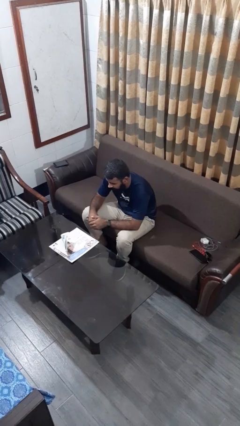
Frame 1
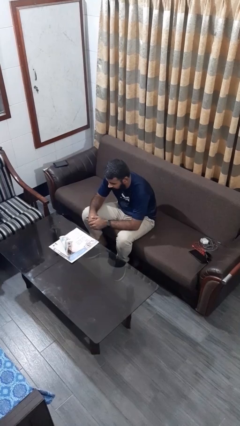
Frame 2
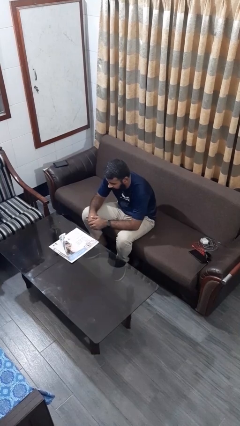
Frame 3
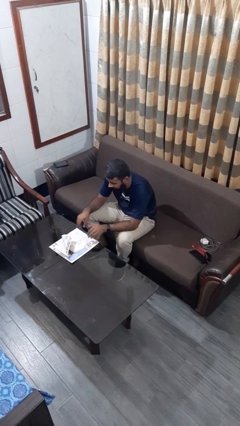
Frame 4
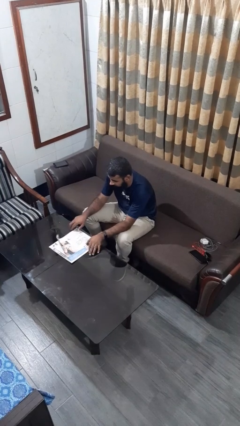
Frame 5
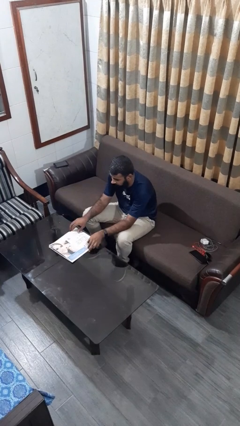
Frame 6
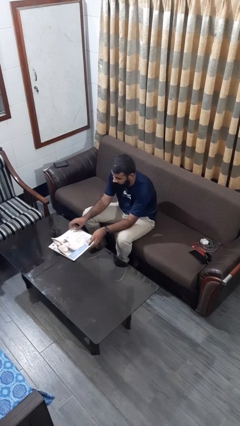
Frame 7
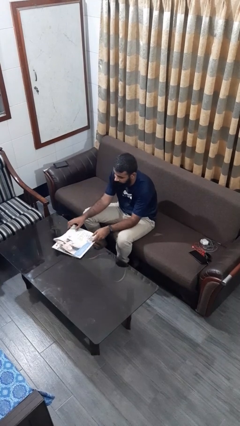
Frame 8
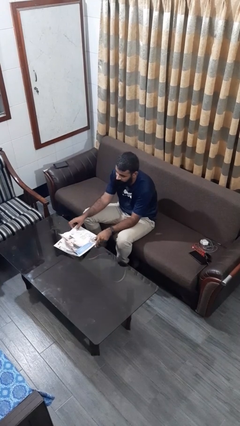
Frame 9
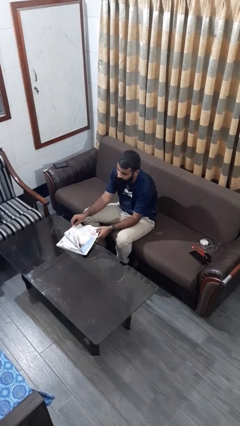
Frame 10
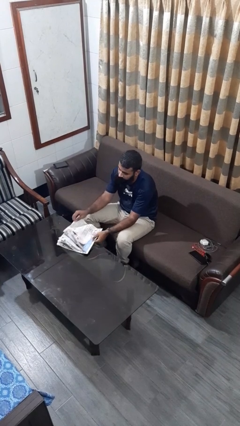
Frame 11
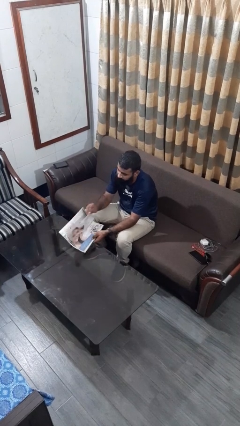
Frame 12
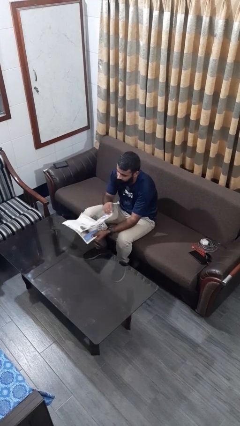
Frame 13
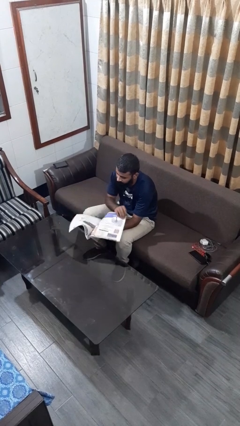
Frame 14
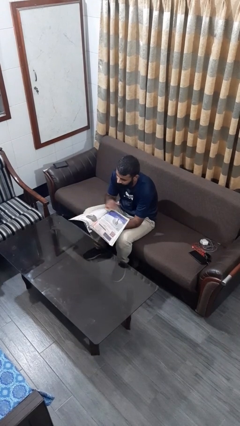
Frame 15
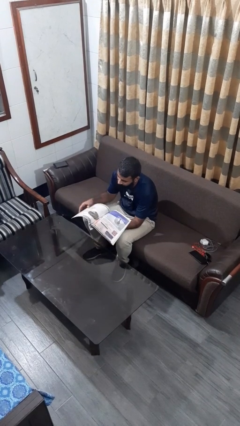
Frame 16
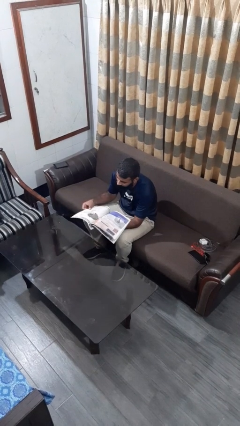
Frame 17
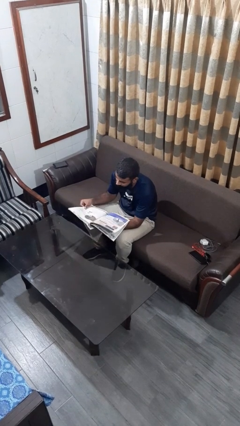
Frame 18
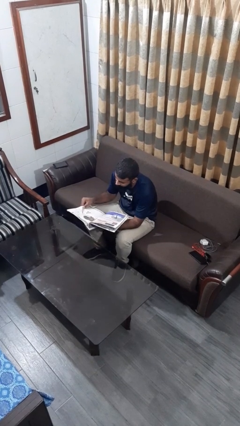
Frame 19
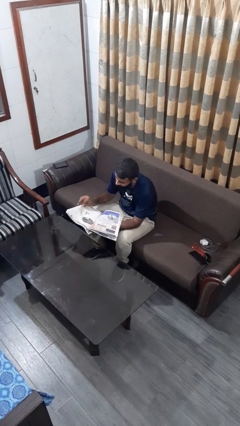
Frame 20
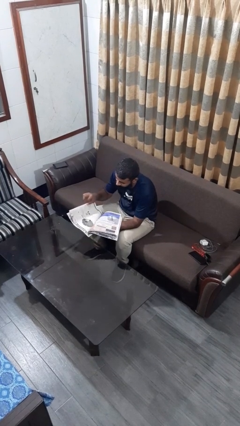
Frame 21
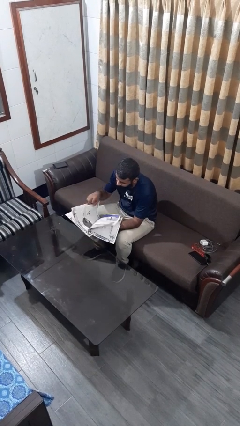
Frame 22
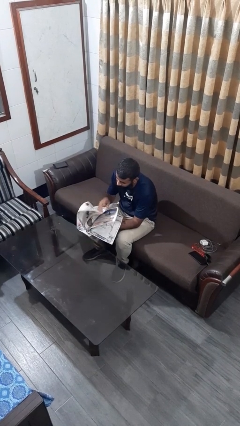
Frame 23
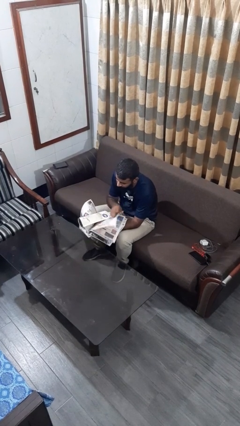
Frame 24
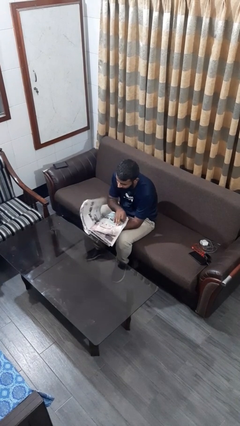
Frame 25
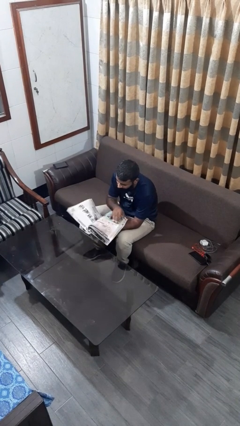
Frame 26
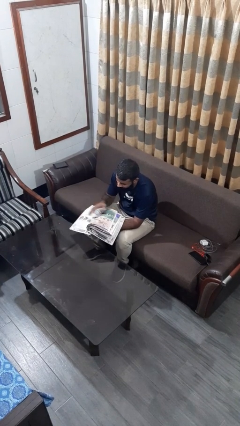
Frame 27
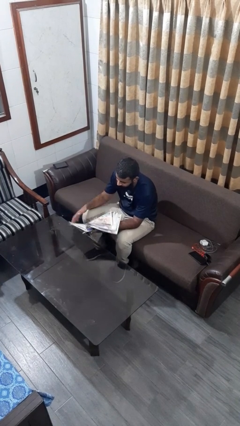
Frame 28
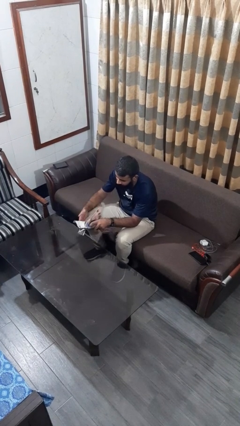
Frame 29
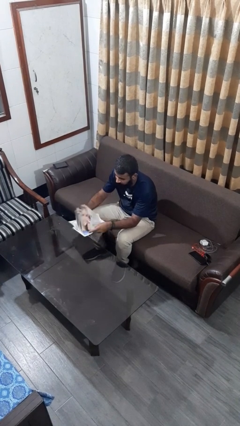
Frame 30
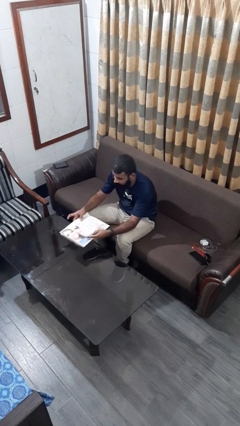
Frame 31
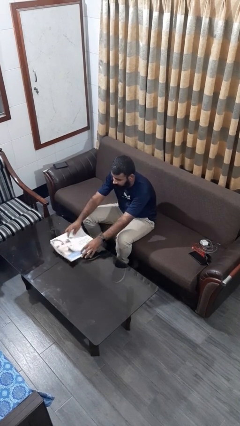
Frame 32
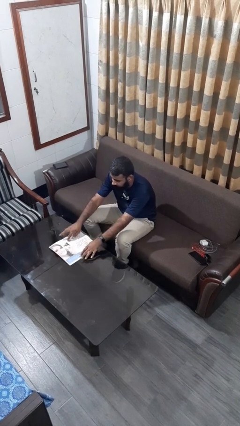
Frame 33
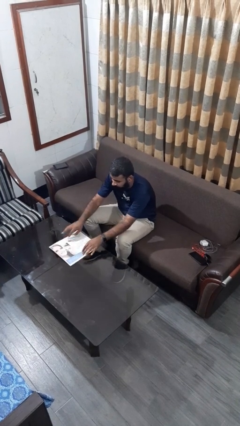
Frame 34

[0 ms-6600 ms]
person reads magazine

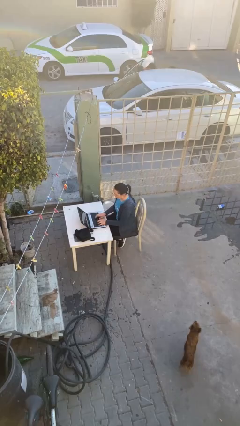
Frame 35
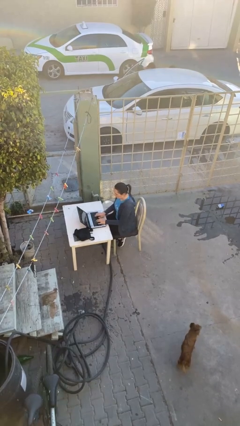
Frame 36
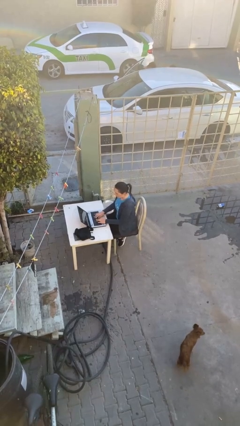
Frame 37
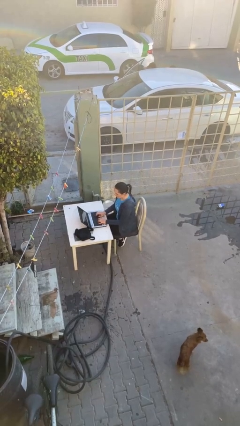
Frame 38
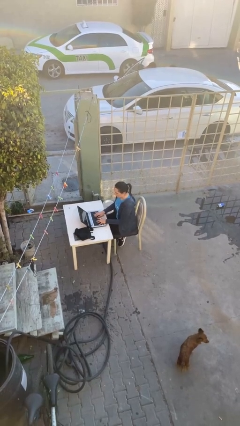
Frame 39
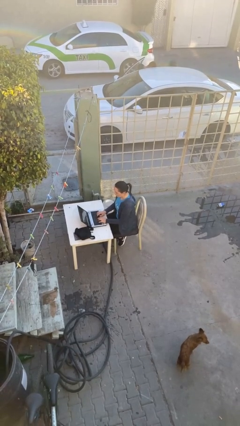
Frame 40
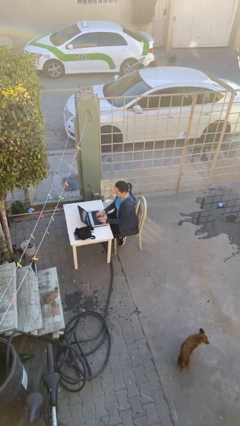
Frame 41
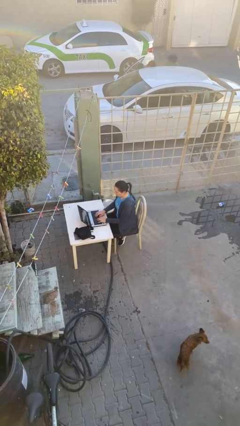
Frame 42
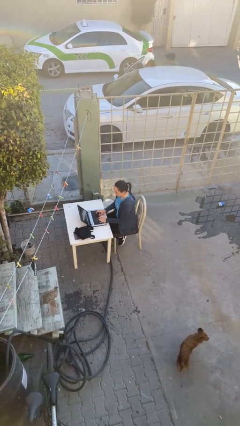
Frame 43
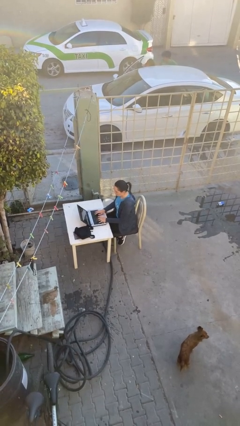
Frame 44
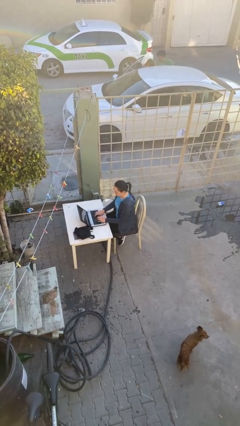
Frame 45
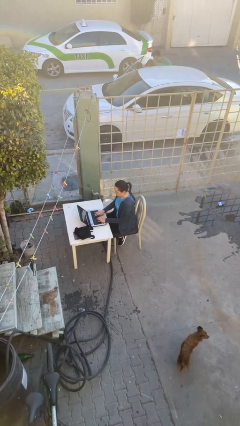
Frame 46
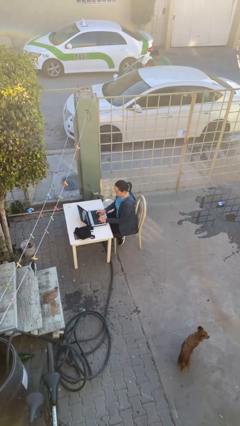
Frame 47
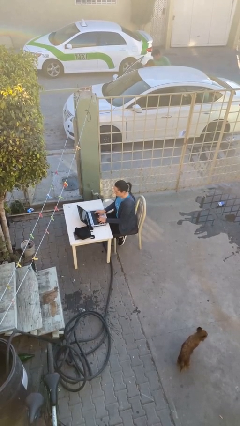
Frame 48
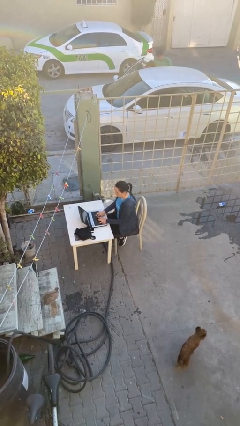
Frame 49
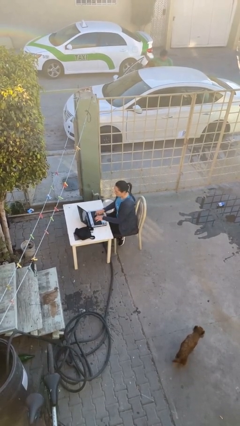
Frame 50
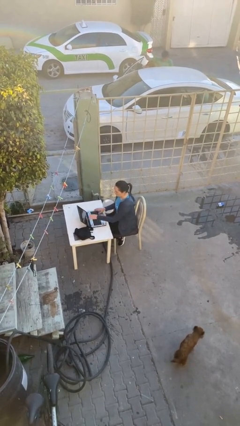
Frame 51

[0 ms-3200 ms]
person interacts with laptop

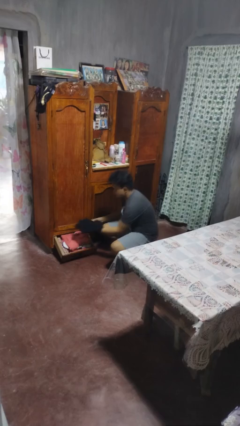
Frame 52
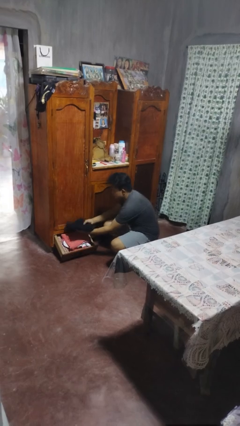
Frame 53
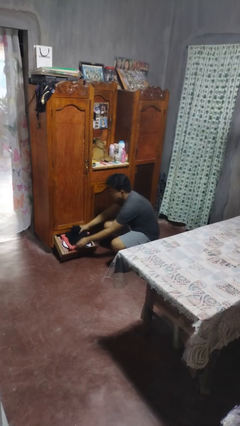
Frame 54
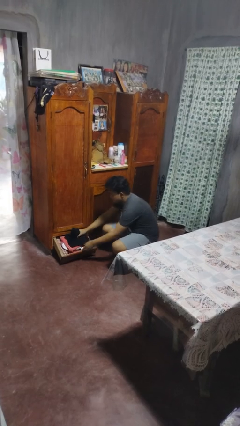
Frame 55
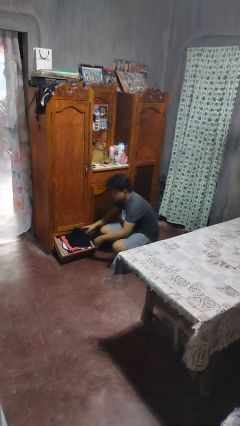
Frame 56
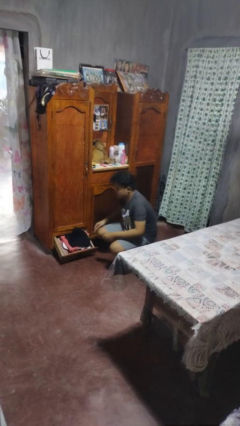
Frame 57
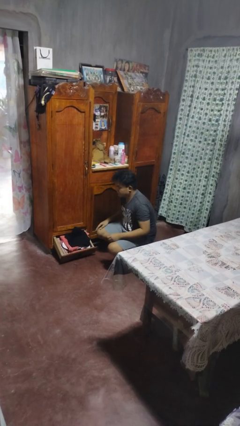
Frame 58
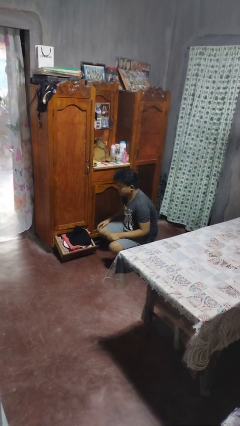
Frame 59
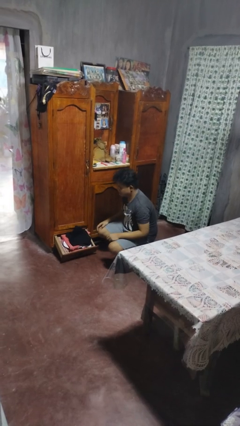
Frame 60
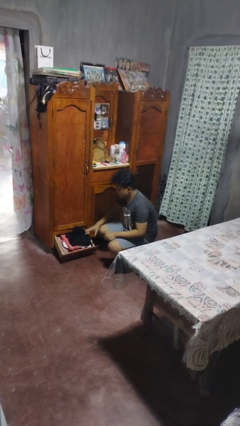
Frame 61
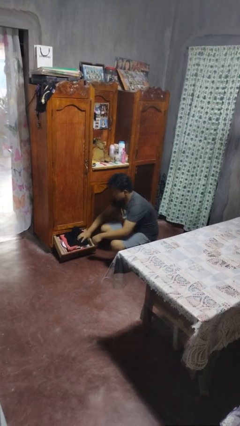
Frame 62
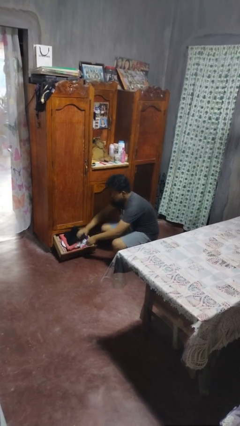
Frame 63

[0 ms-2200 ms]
person puts clothes into dresser

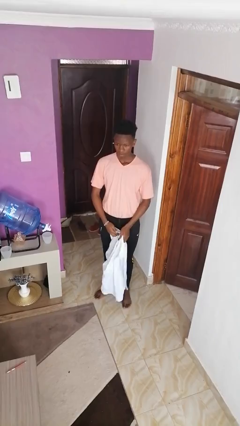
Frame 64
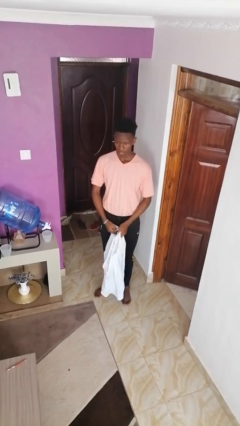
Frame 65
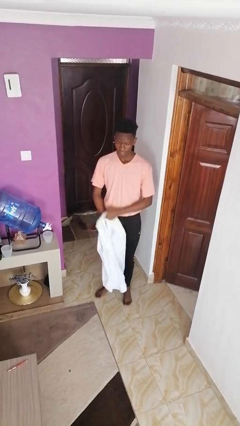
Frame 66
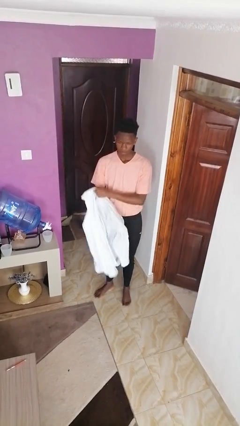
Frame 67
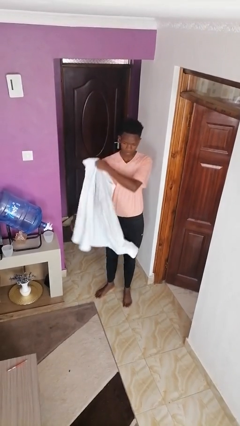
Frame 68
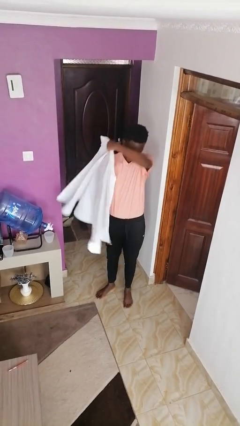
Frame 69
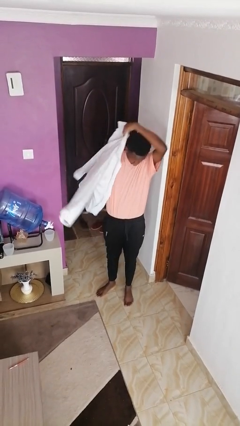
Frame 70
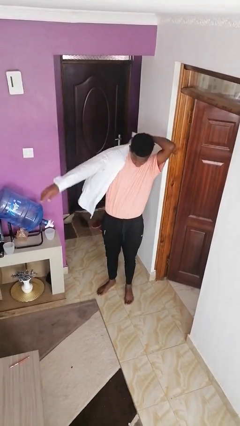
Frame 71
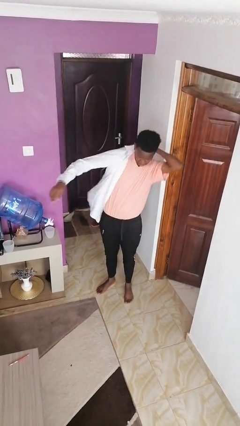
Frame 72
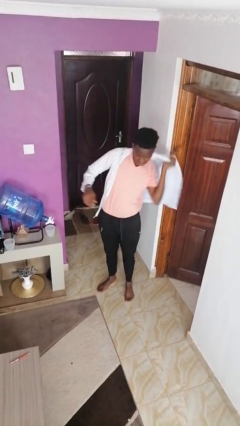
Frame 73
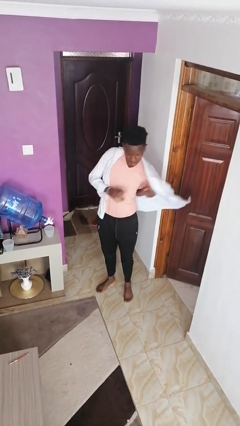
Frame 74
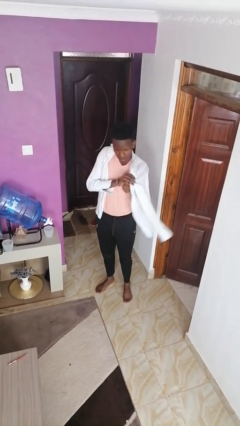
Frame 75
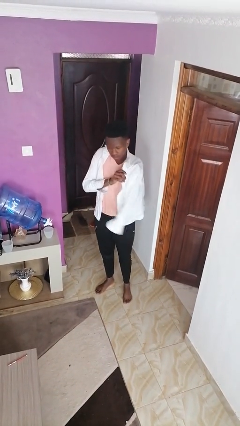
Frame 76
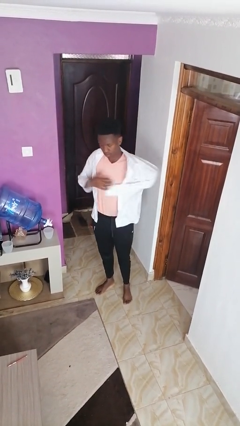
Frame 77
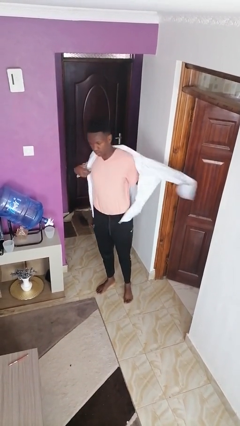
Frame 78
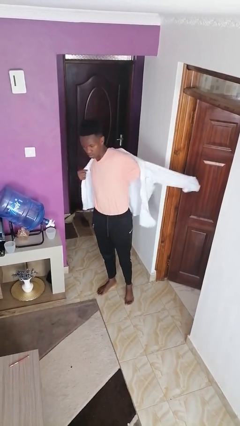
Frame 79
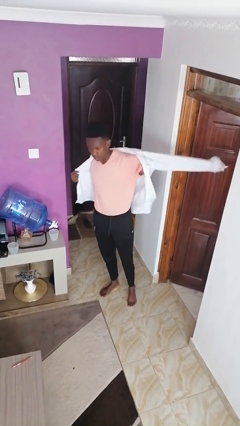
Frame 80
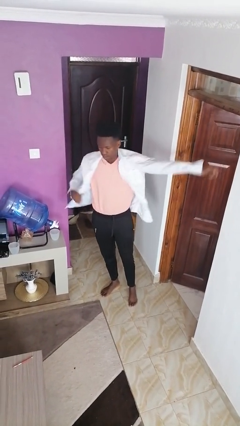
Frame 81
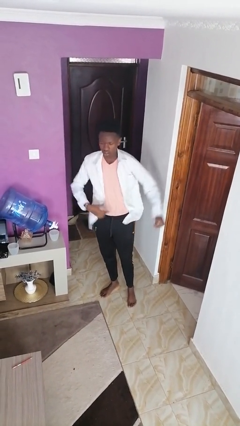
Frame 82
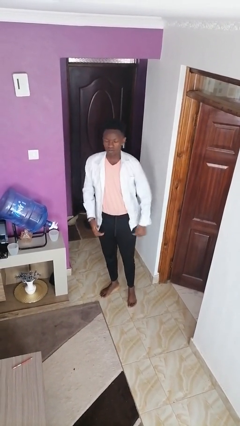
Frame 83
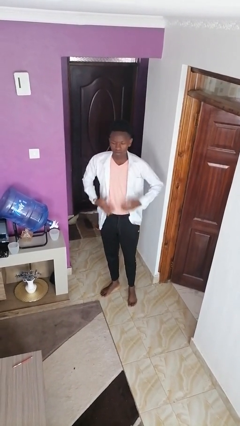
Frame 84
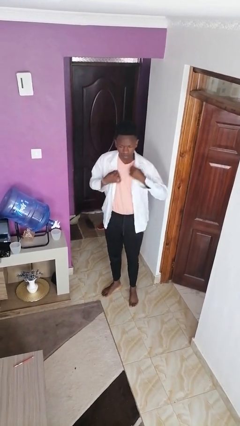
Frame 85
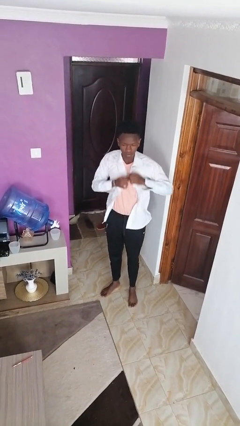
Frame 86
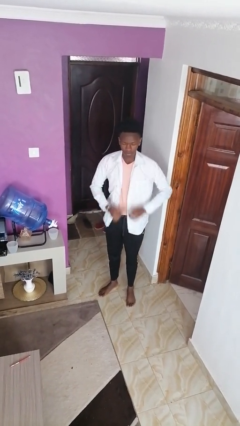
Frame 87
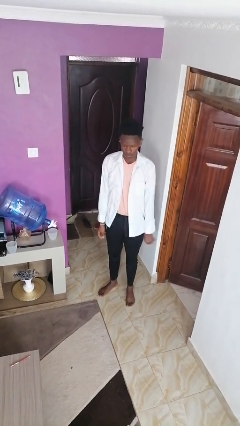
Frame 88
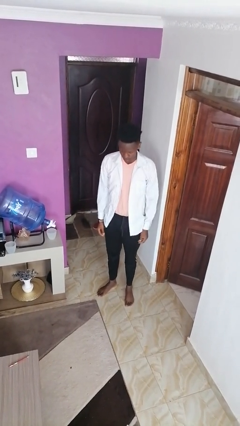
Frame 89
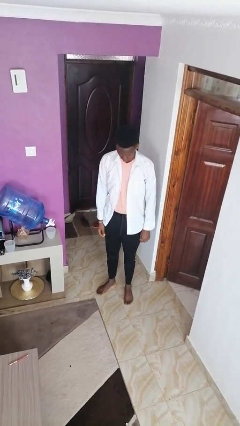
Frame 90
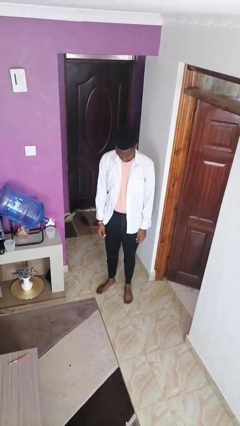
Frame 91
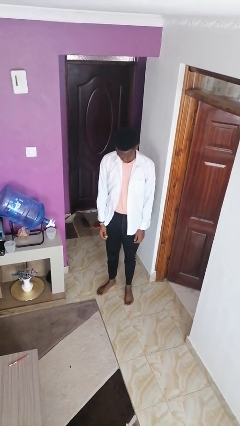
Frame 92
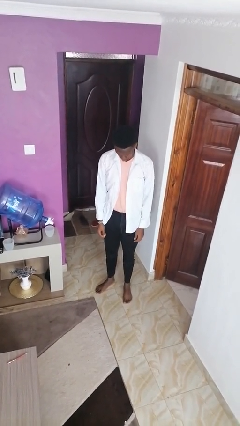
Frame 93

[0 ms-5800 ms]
person puts on shirt
